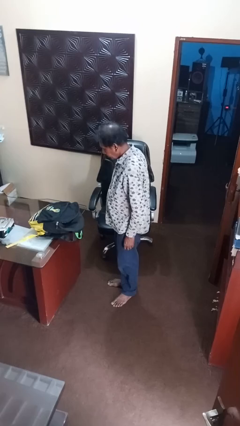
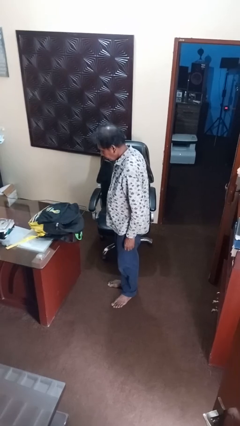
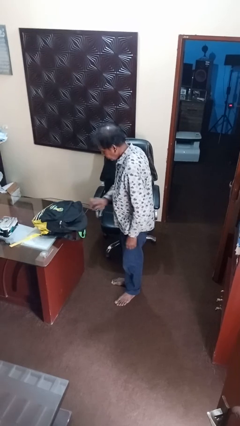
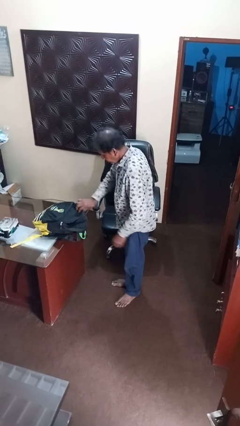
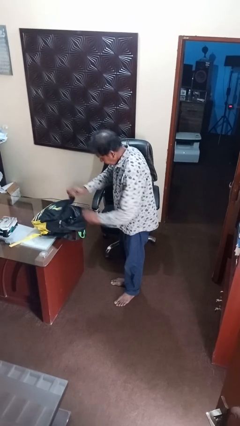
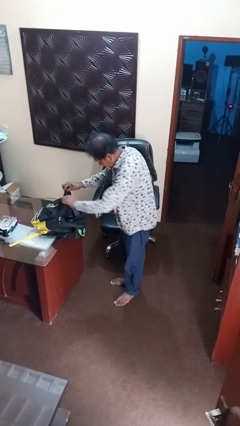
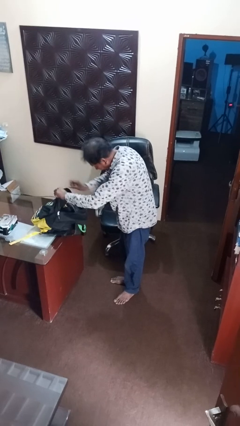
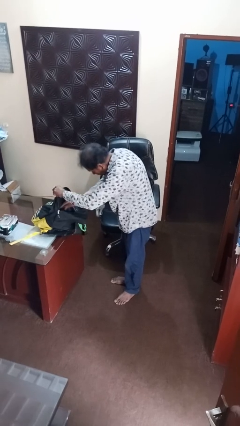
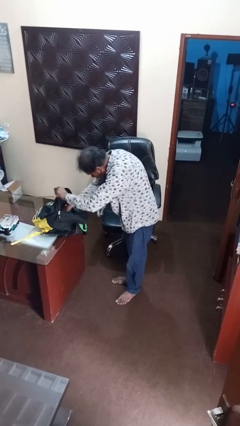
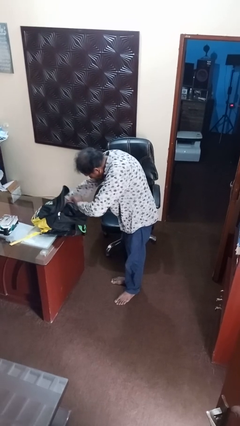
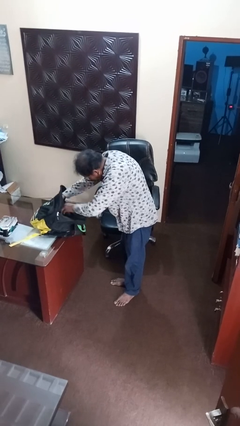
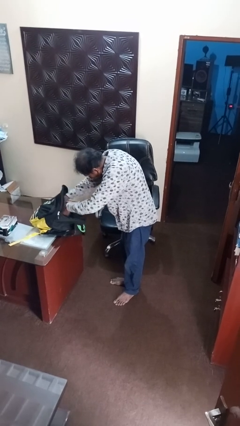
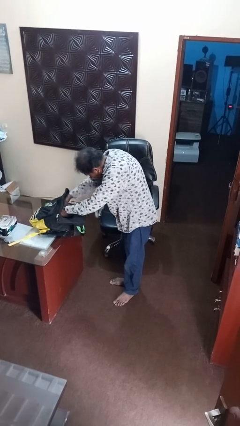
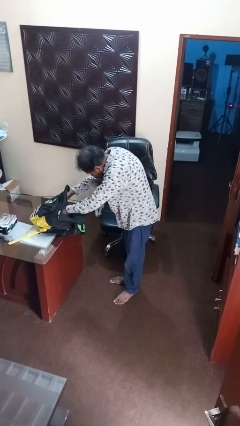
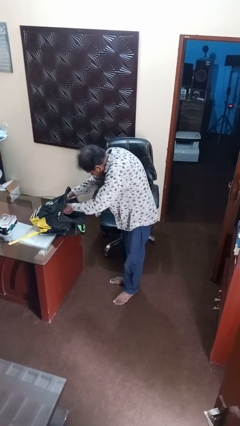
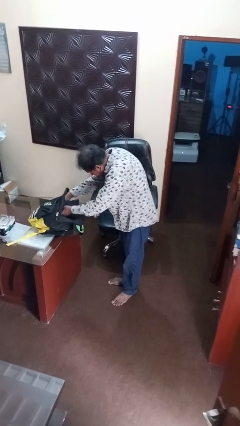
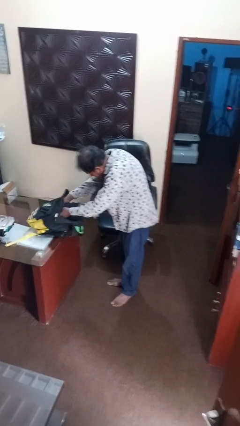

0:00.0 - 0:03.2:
person searches in backpack

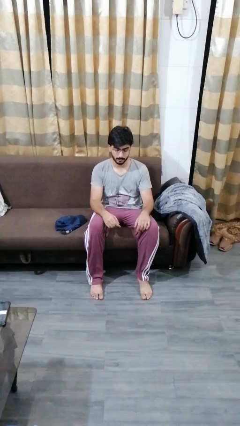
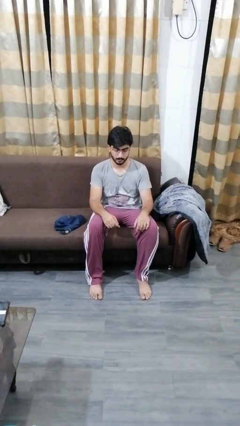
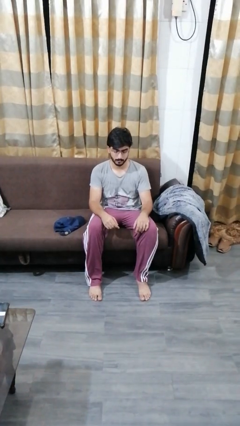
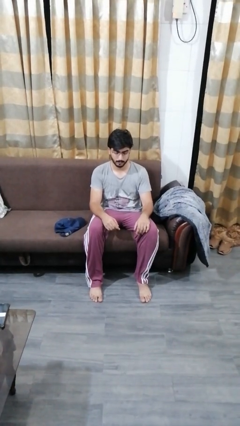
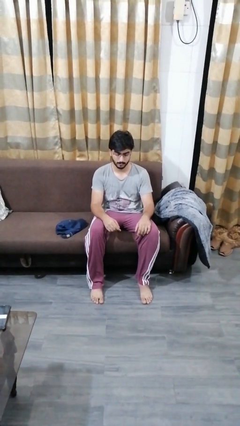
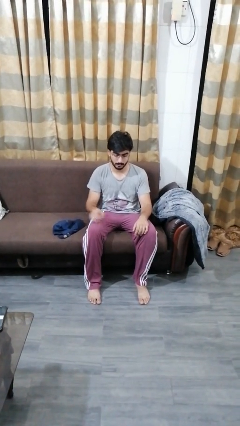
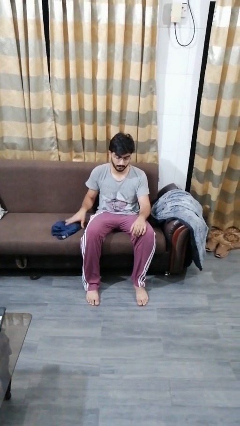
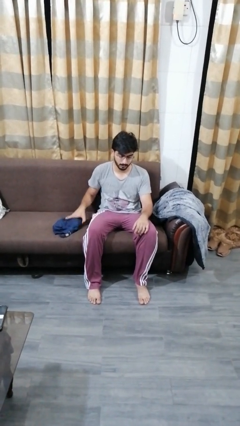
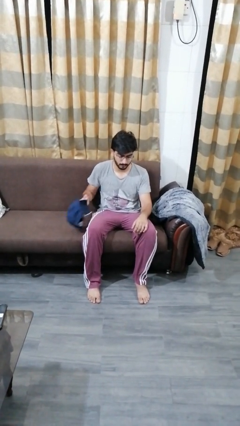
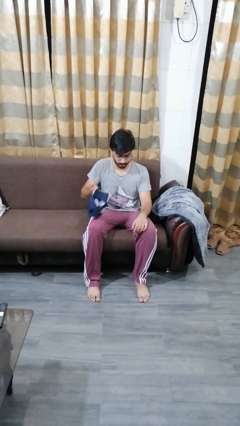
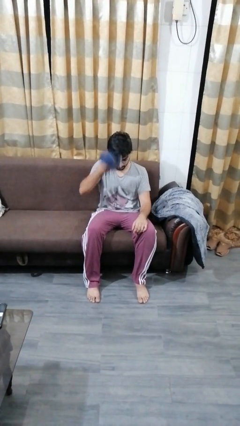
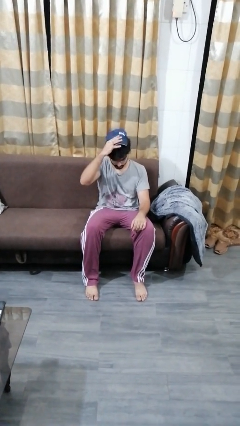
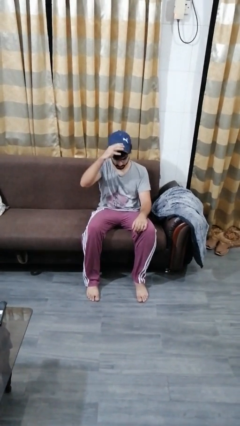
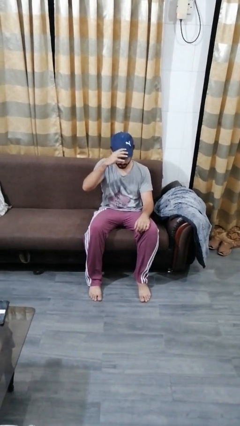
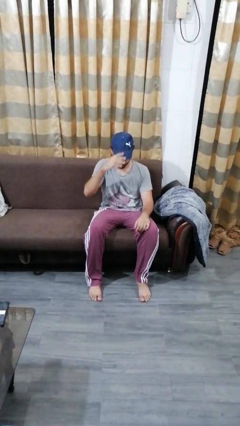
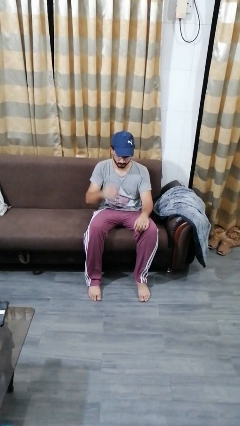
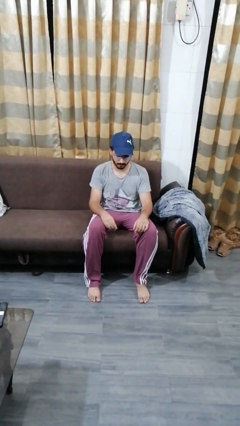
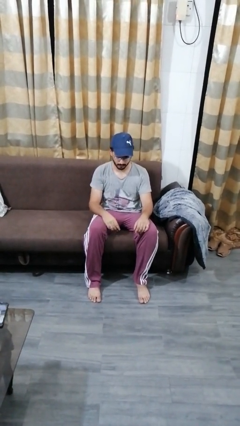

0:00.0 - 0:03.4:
person puts on hat

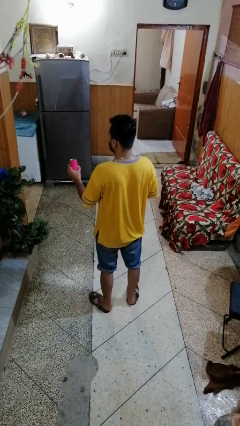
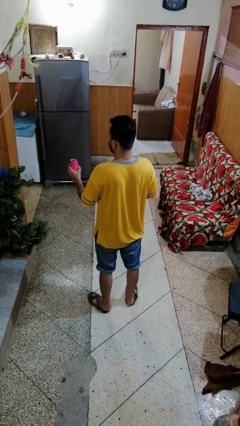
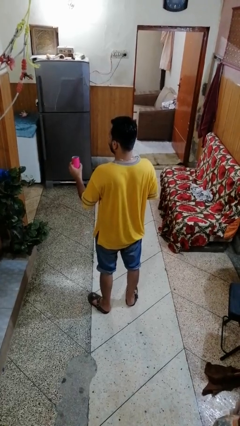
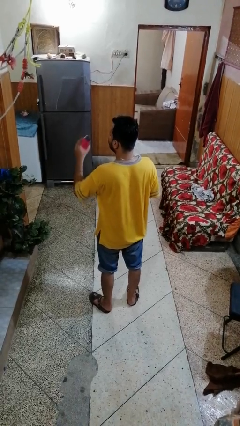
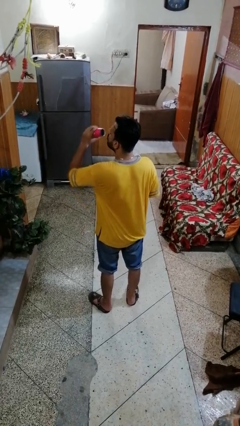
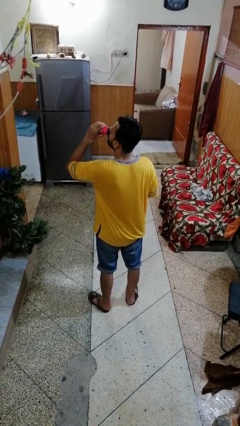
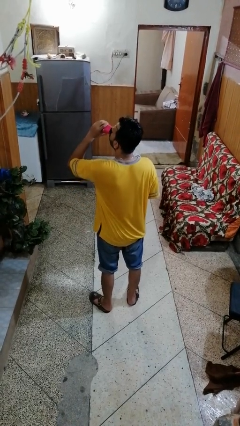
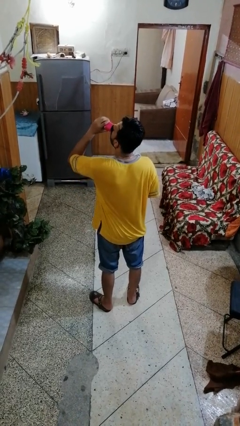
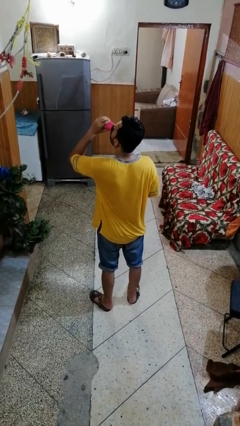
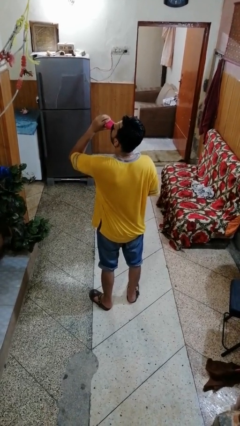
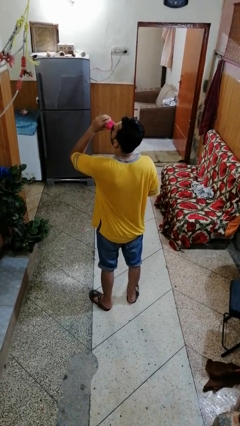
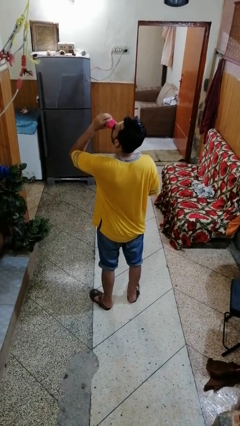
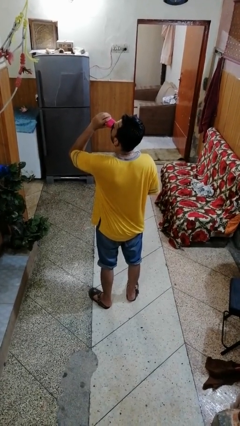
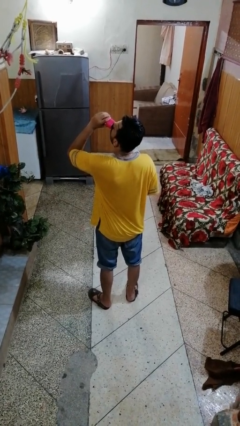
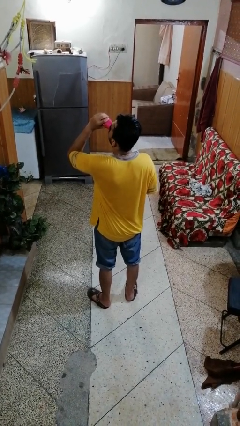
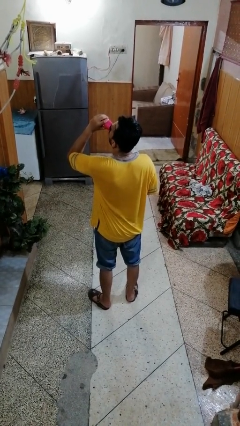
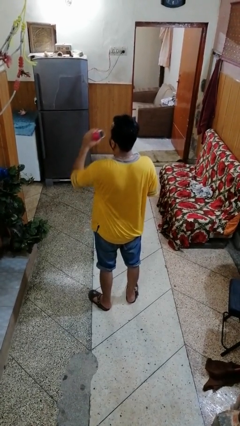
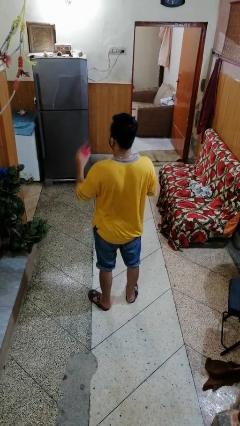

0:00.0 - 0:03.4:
person drinks from beverage can

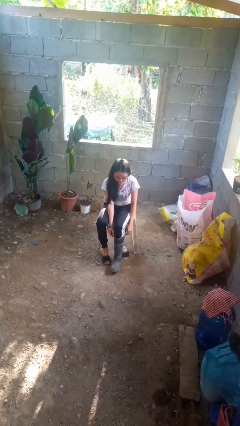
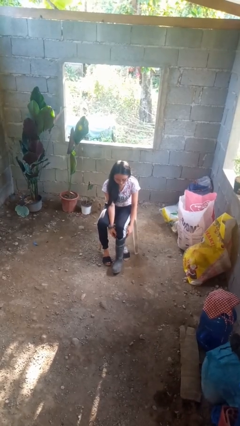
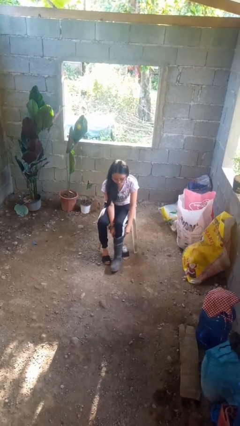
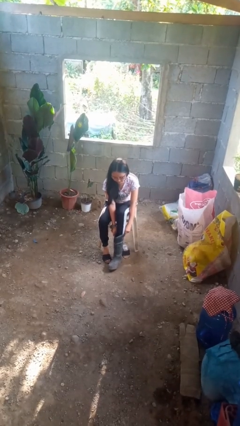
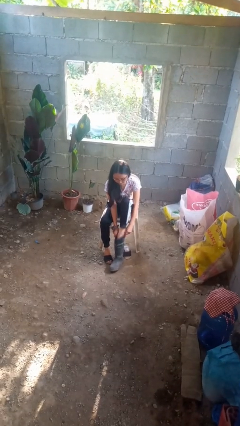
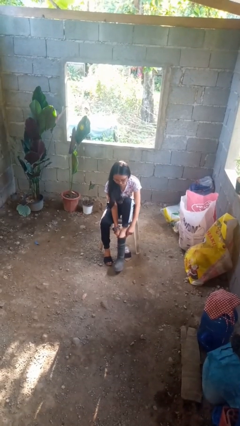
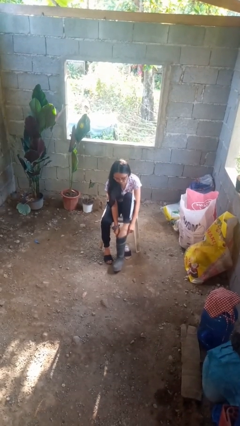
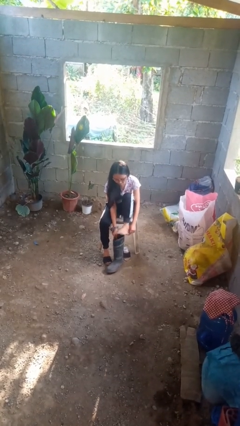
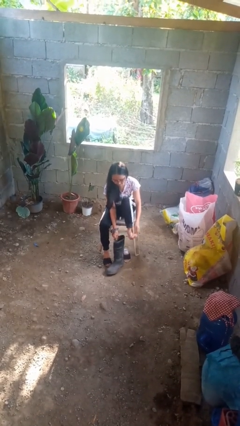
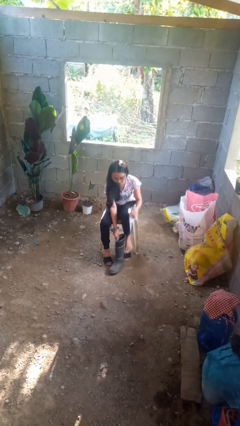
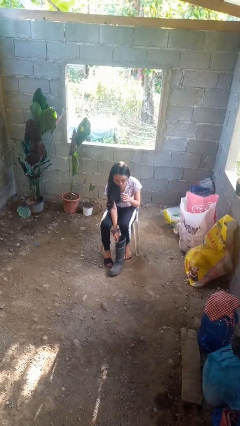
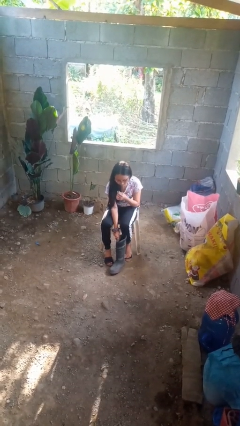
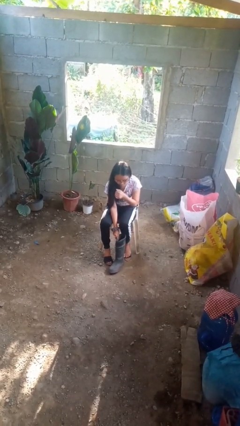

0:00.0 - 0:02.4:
person takes off boots

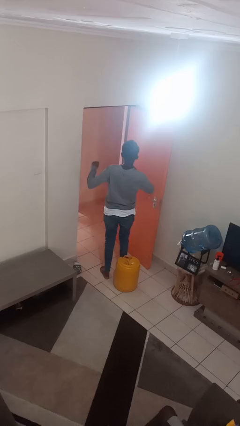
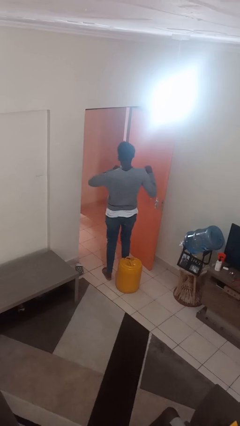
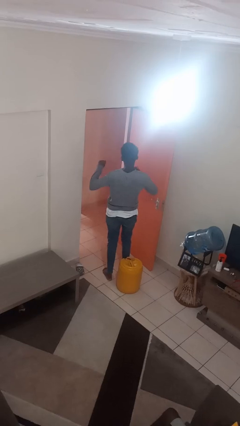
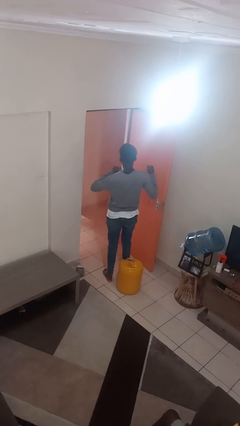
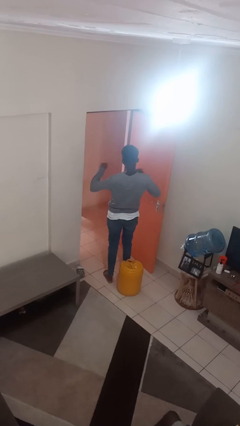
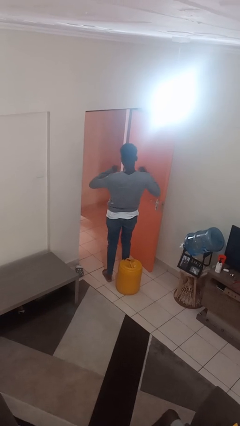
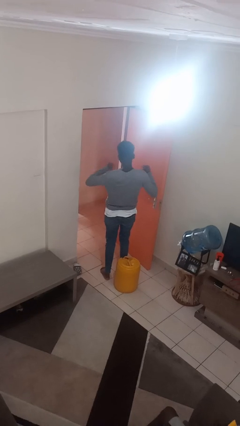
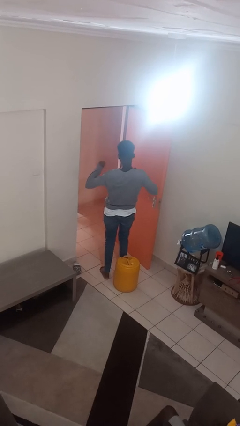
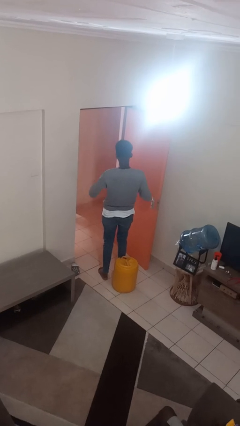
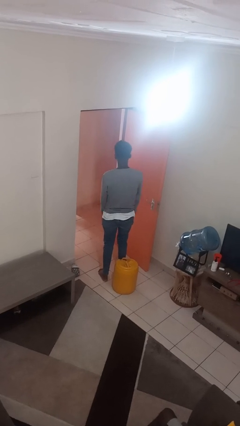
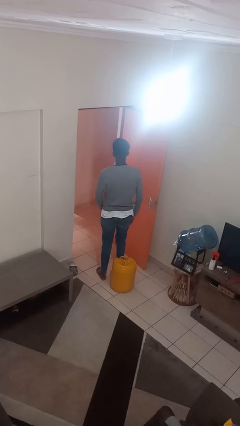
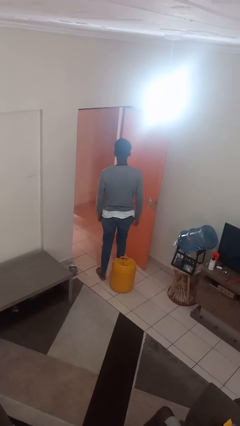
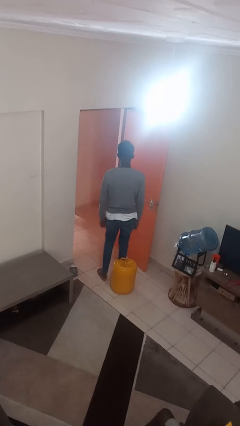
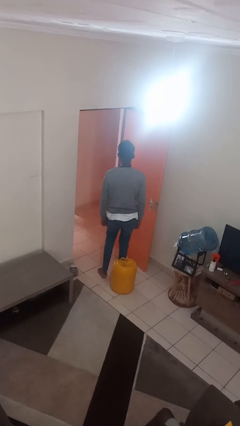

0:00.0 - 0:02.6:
person drums on chest

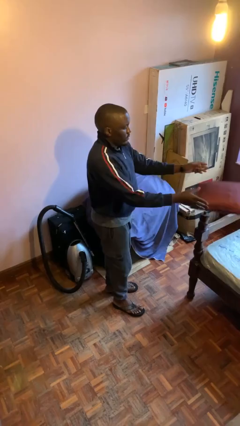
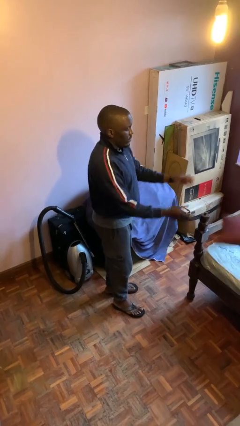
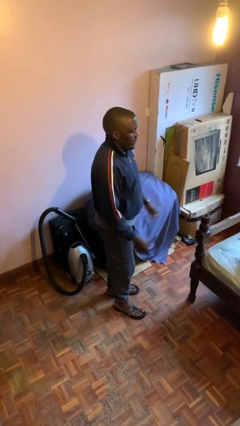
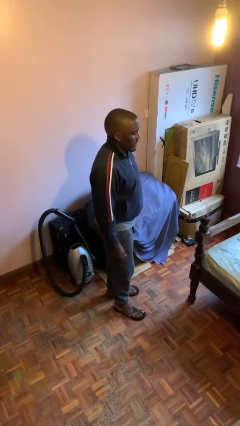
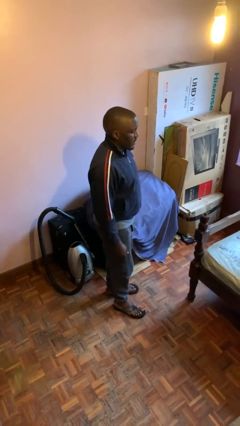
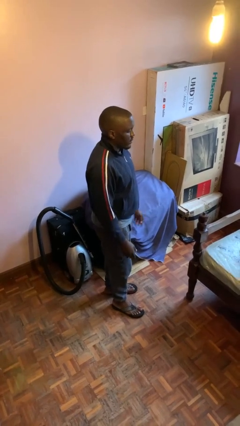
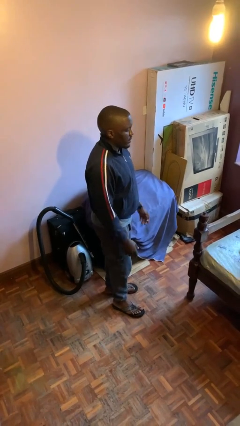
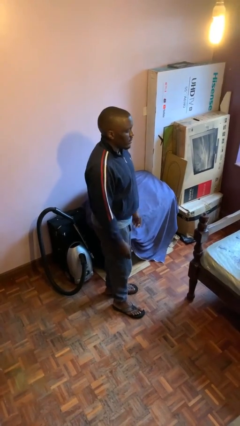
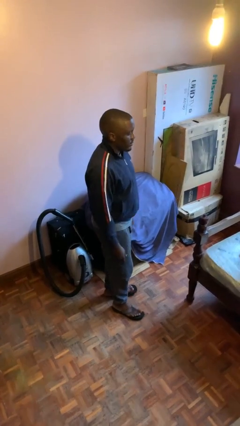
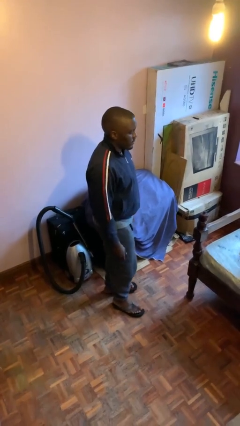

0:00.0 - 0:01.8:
person throws object on bed

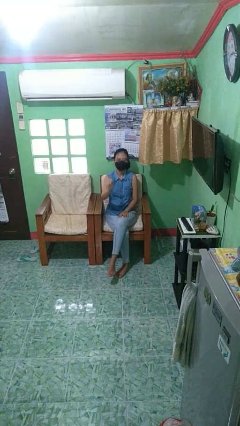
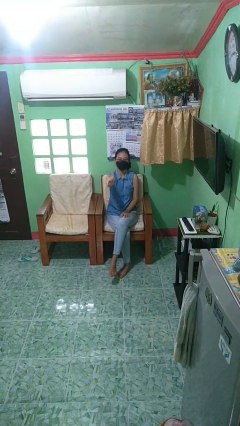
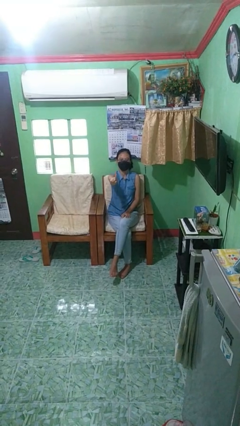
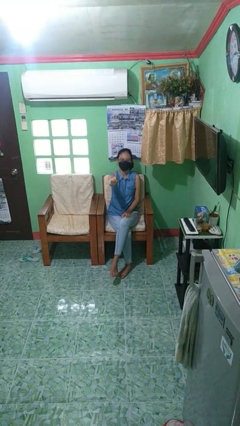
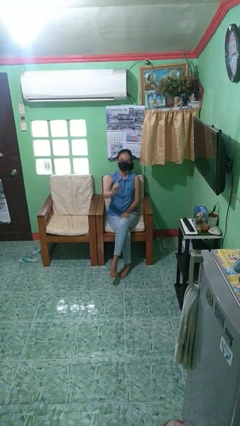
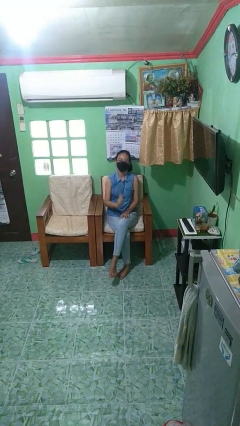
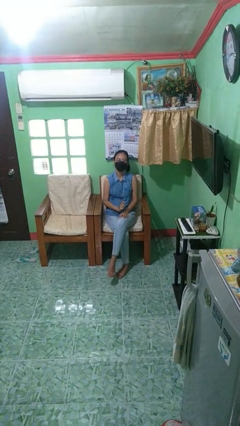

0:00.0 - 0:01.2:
person gestures number one
